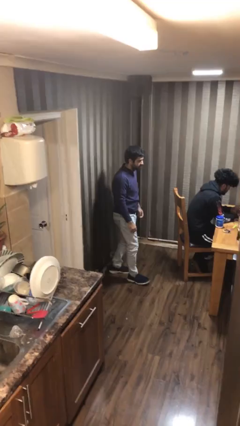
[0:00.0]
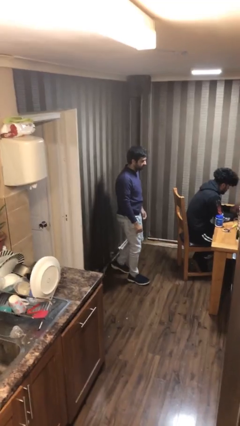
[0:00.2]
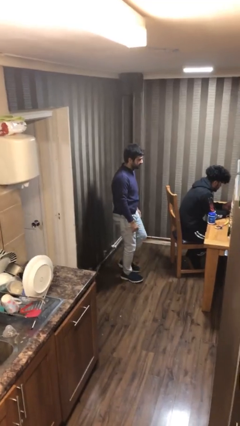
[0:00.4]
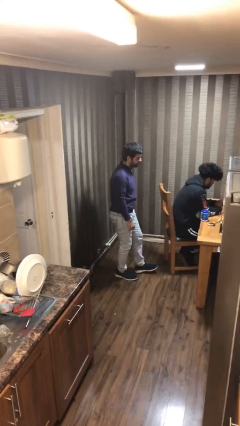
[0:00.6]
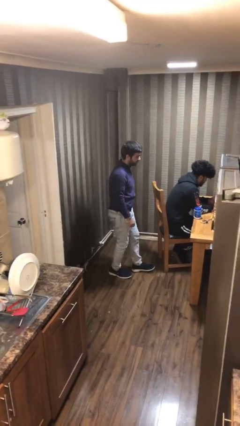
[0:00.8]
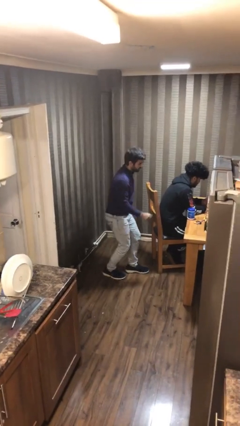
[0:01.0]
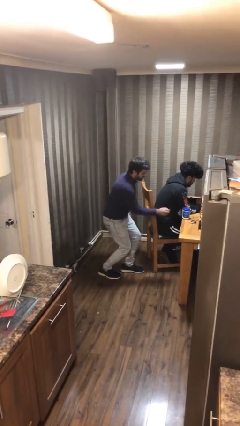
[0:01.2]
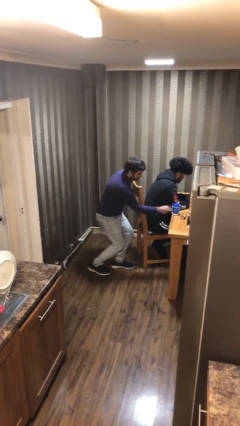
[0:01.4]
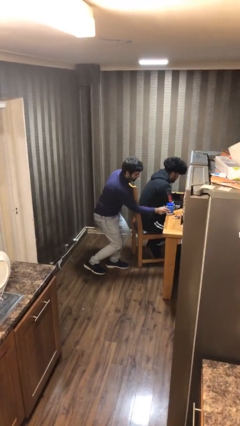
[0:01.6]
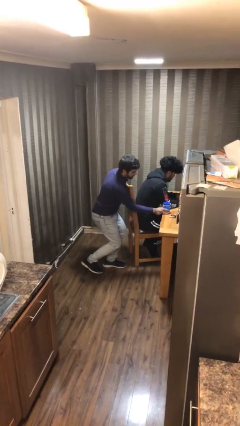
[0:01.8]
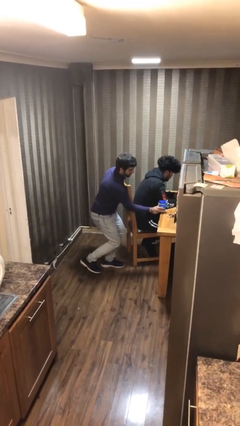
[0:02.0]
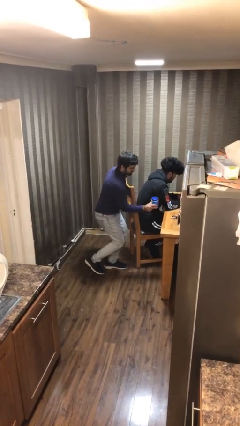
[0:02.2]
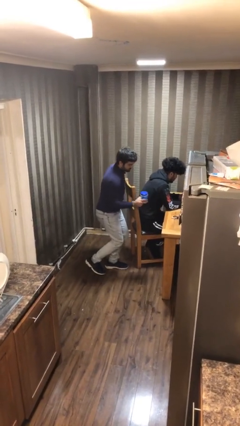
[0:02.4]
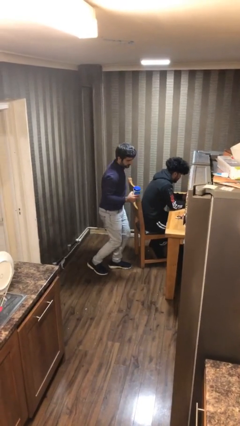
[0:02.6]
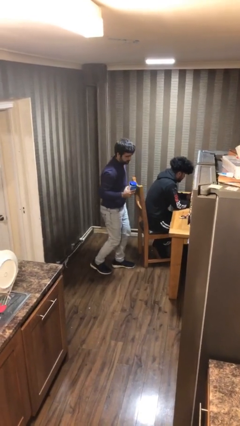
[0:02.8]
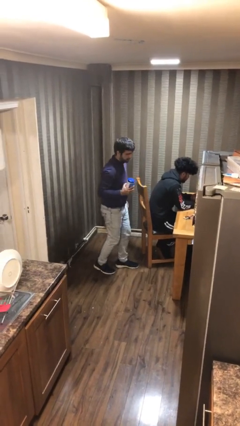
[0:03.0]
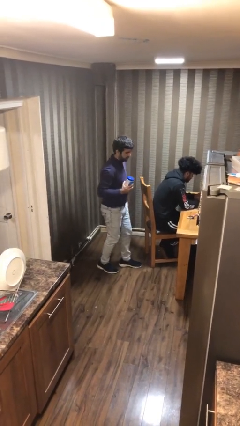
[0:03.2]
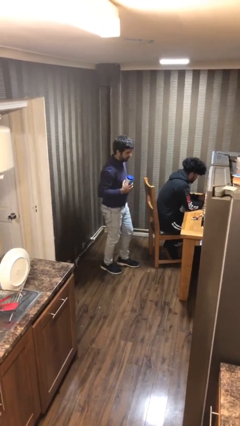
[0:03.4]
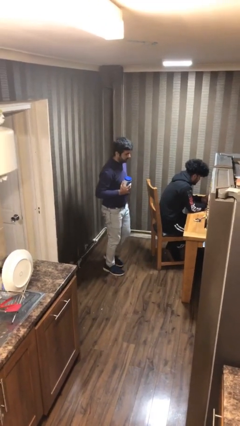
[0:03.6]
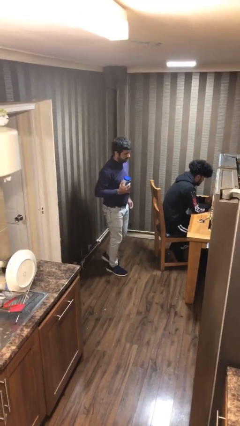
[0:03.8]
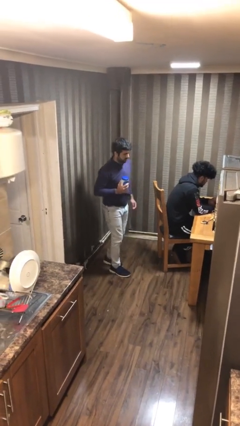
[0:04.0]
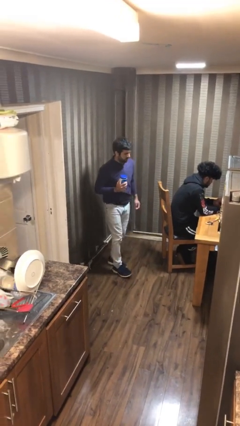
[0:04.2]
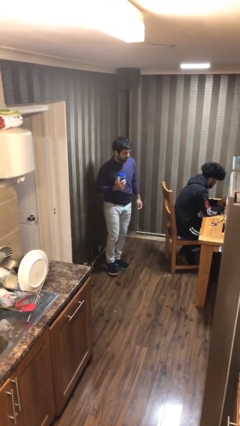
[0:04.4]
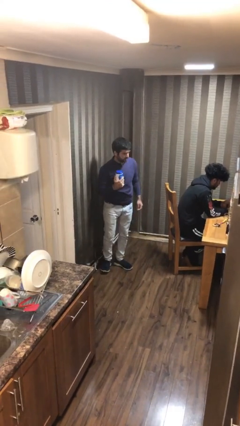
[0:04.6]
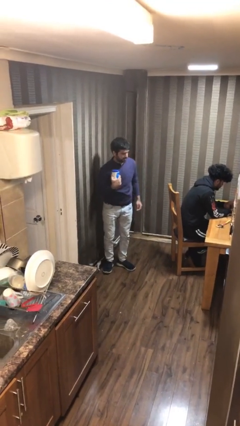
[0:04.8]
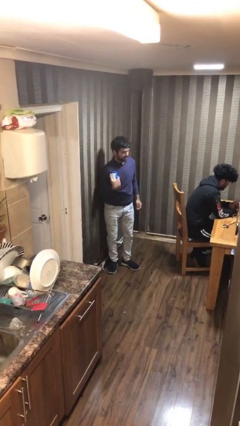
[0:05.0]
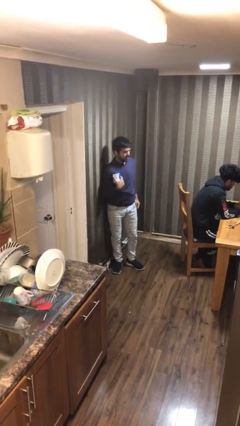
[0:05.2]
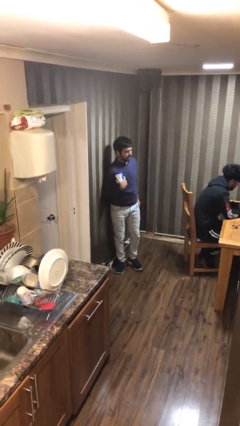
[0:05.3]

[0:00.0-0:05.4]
person steals object from person

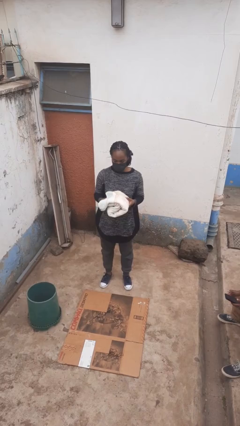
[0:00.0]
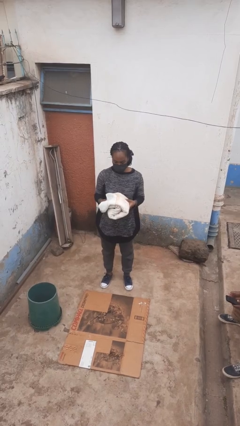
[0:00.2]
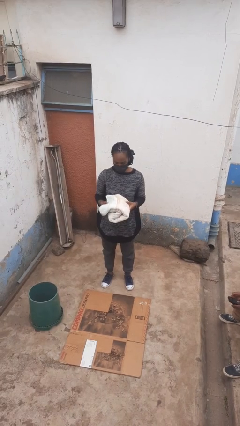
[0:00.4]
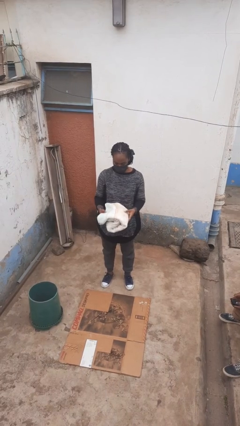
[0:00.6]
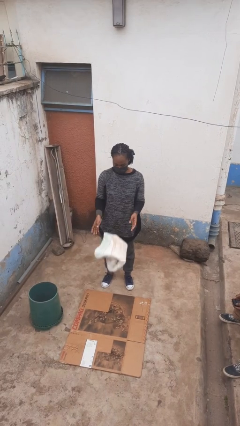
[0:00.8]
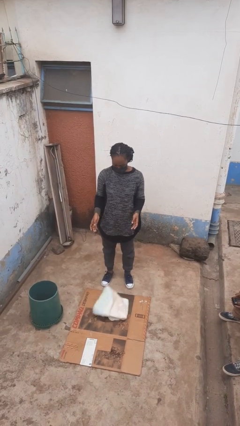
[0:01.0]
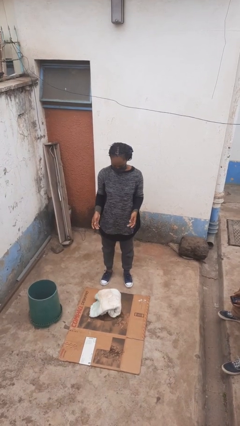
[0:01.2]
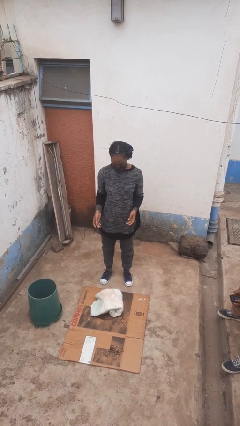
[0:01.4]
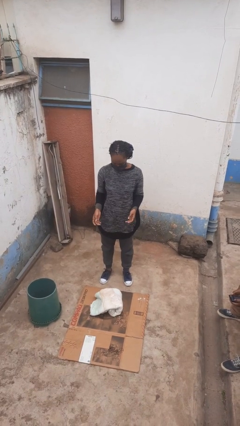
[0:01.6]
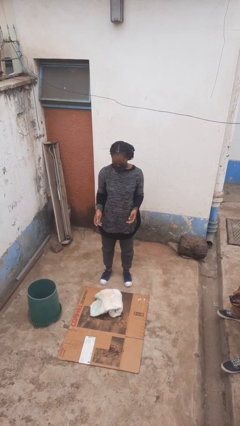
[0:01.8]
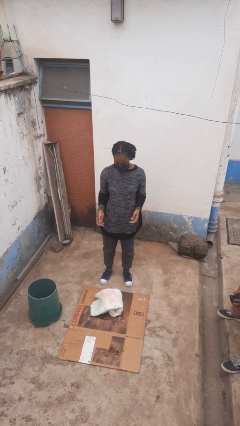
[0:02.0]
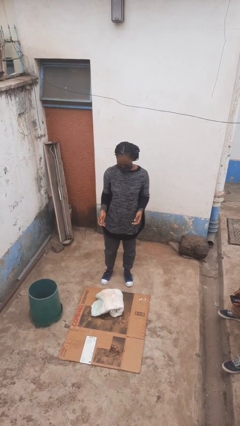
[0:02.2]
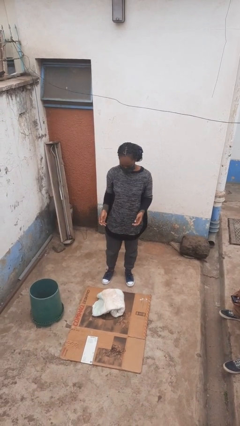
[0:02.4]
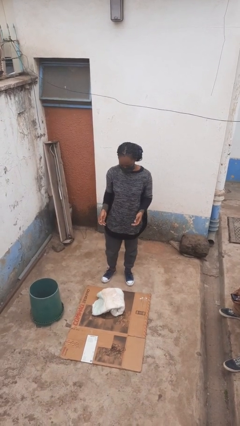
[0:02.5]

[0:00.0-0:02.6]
person drops object

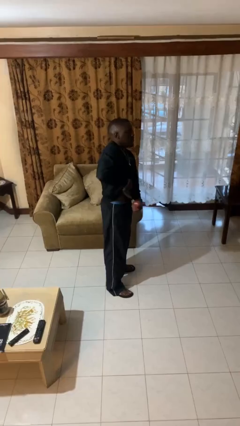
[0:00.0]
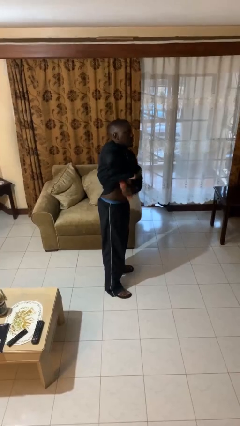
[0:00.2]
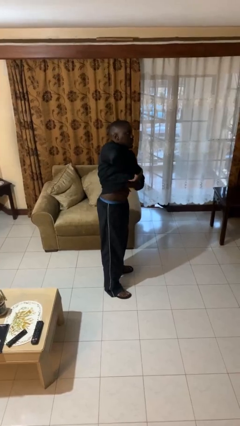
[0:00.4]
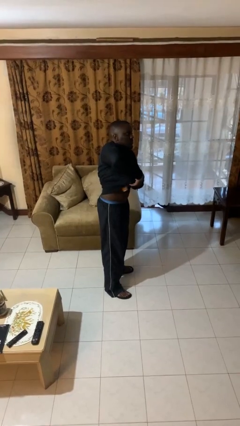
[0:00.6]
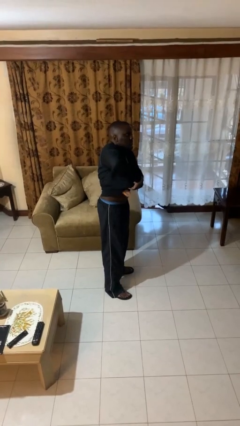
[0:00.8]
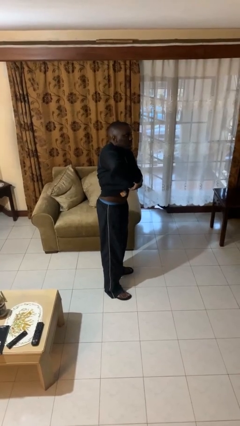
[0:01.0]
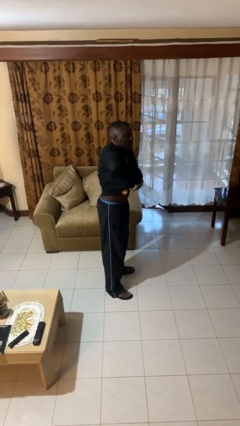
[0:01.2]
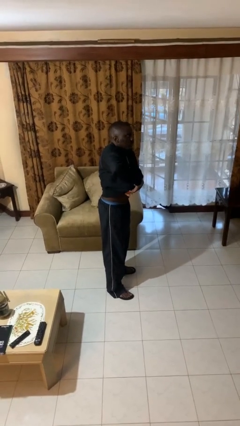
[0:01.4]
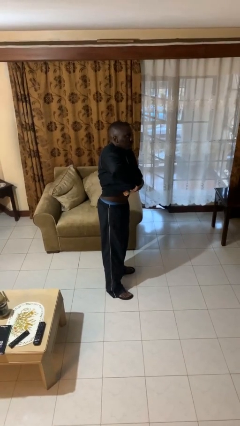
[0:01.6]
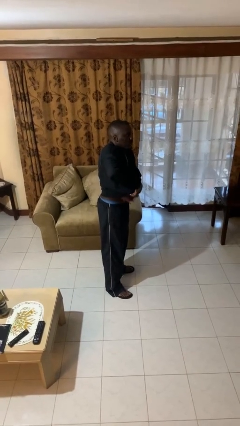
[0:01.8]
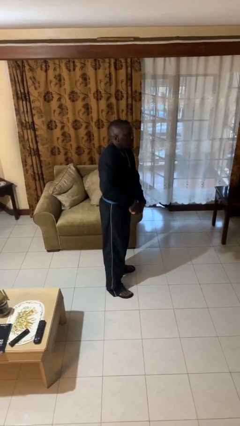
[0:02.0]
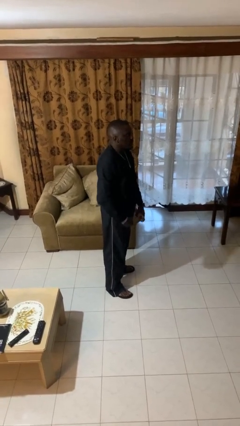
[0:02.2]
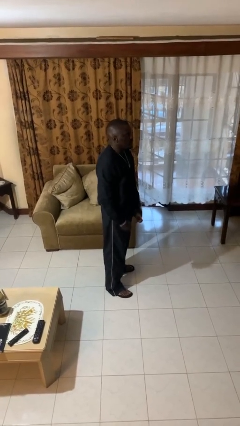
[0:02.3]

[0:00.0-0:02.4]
person applies deodorant

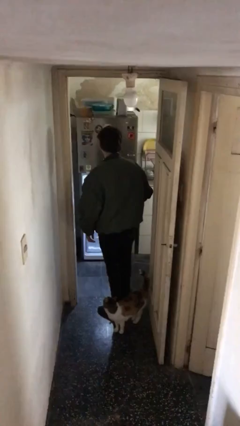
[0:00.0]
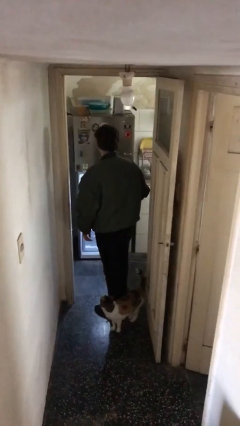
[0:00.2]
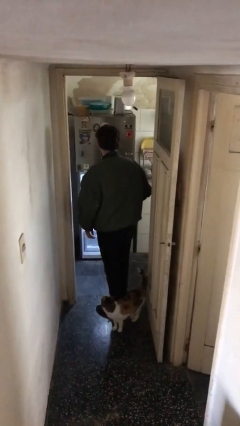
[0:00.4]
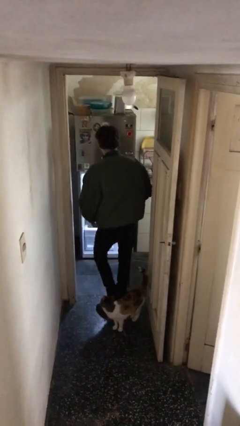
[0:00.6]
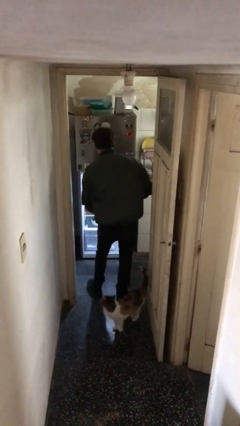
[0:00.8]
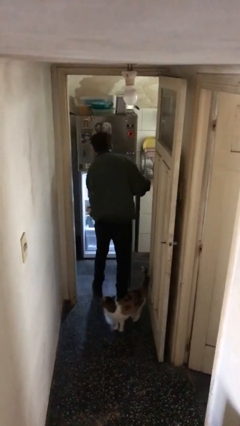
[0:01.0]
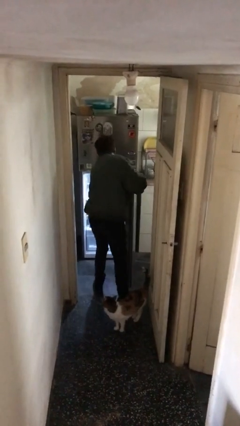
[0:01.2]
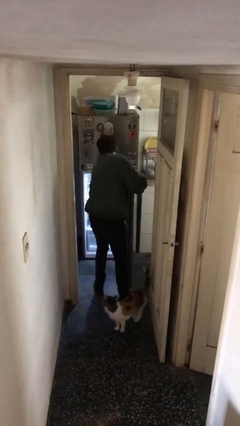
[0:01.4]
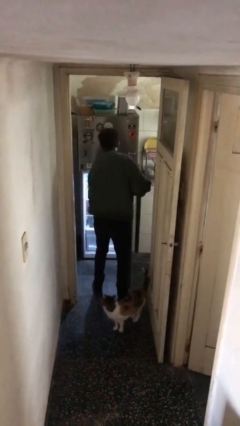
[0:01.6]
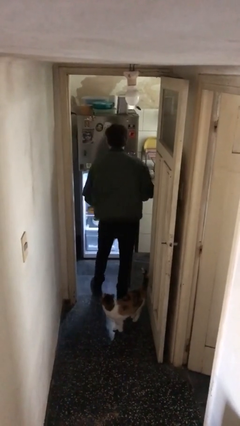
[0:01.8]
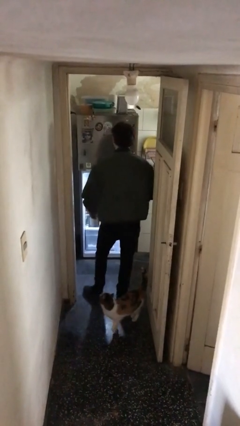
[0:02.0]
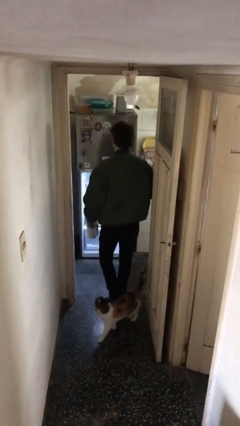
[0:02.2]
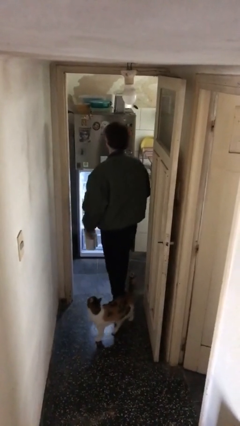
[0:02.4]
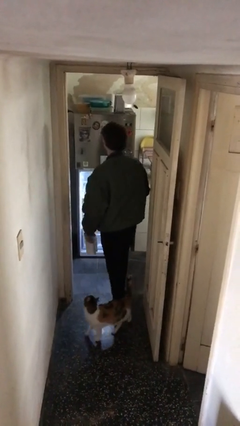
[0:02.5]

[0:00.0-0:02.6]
person takes object from refrigerator

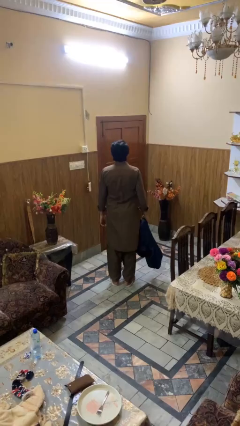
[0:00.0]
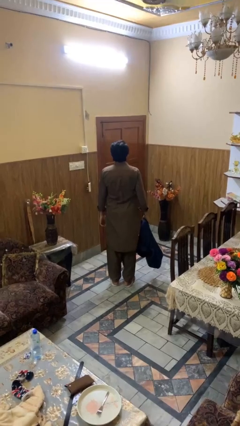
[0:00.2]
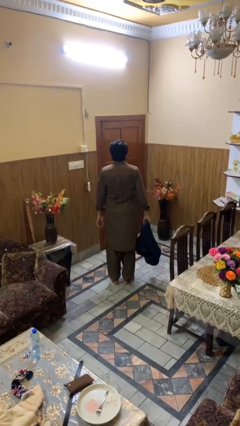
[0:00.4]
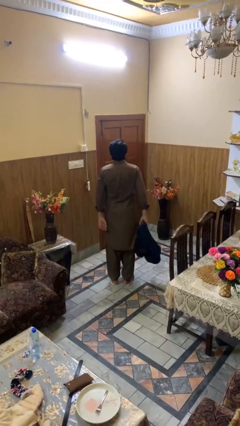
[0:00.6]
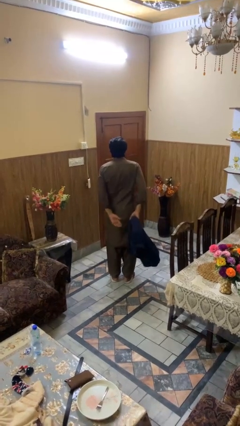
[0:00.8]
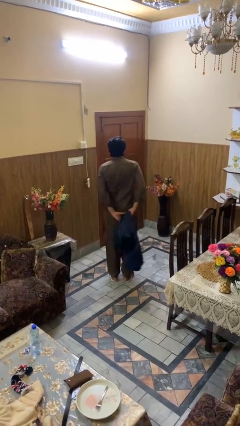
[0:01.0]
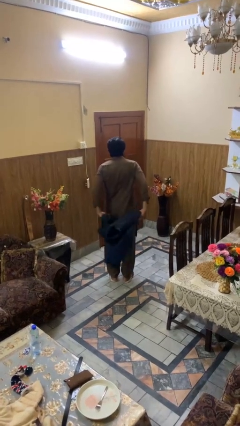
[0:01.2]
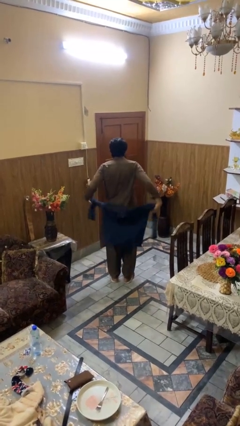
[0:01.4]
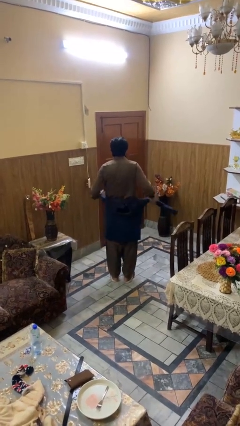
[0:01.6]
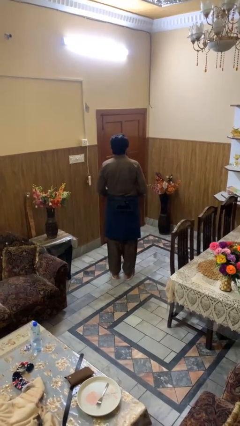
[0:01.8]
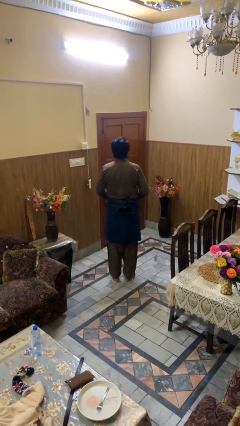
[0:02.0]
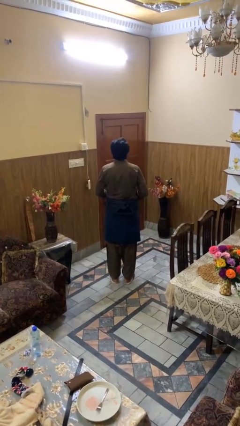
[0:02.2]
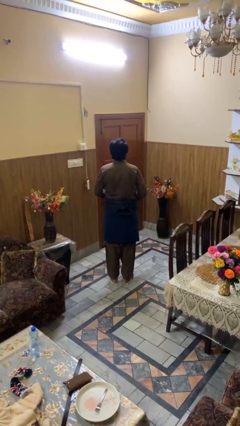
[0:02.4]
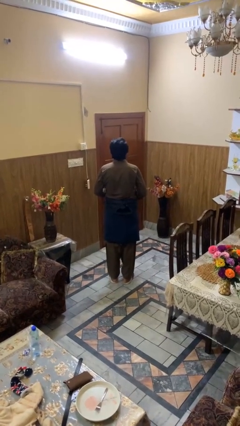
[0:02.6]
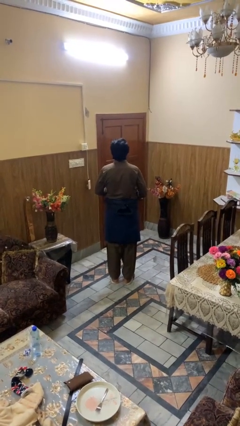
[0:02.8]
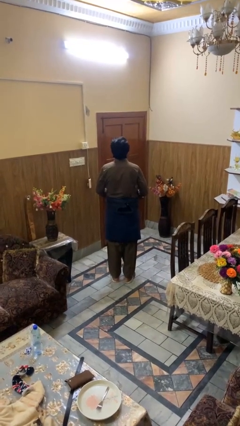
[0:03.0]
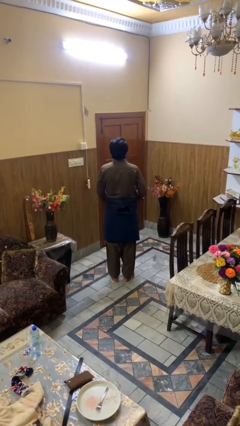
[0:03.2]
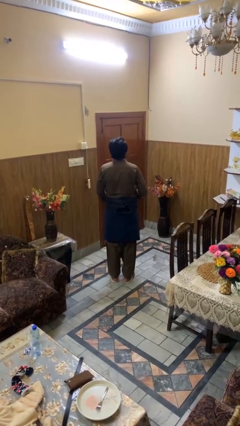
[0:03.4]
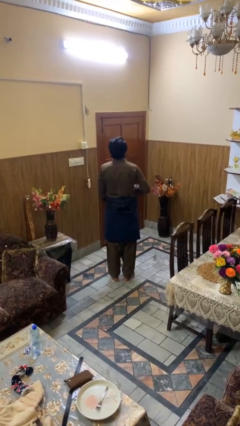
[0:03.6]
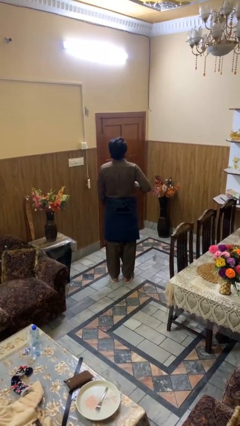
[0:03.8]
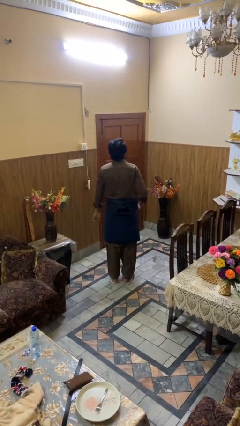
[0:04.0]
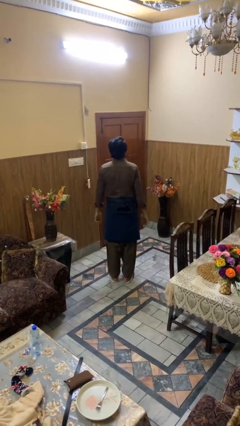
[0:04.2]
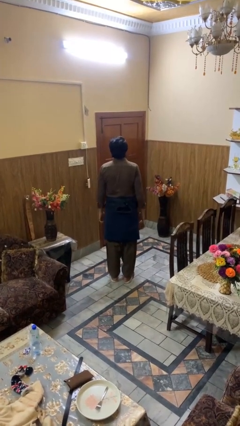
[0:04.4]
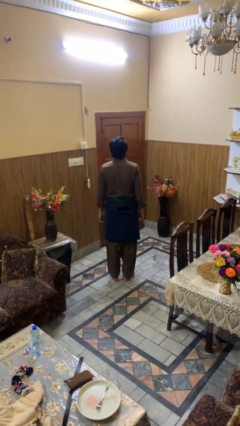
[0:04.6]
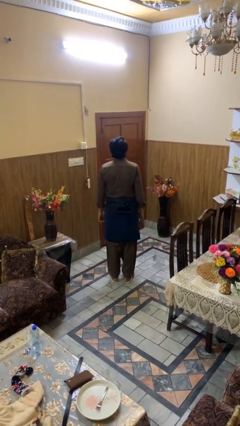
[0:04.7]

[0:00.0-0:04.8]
person ties jacket around waist
